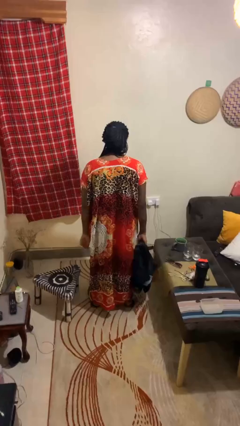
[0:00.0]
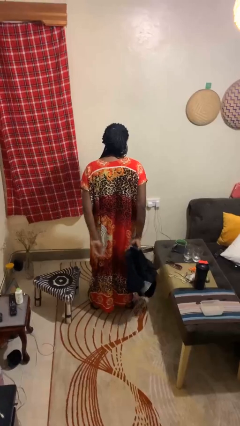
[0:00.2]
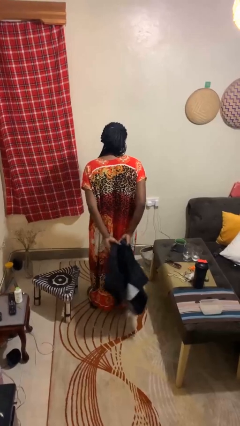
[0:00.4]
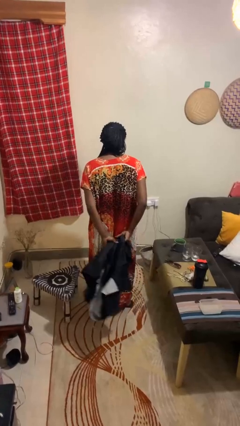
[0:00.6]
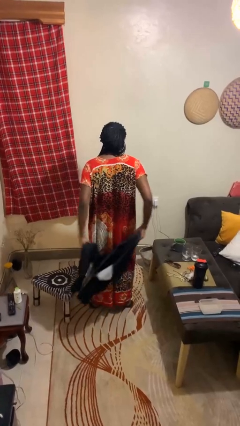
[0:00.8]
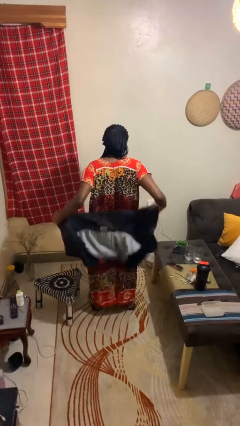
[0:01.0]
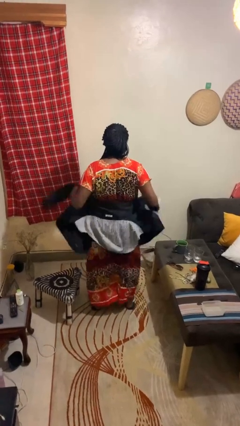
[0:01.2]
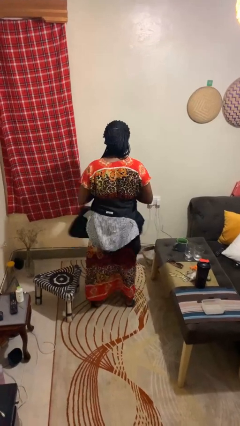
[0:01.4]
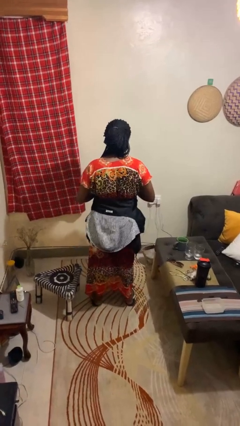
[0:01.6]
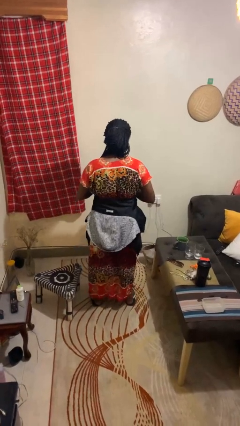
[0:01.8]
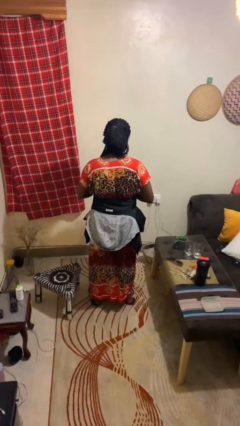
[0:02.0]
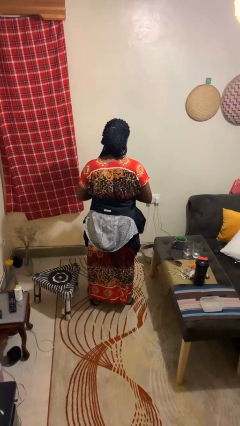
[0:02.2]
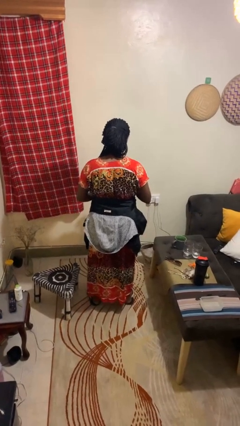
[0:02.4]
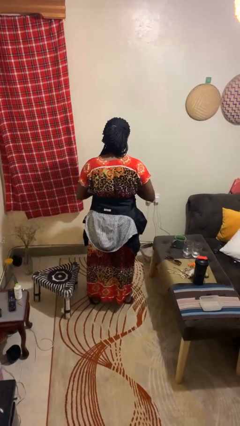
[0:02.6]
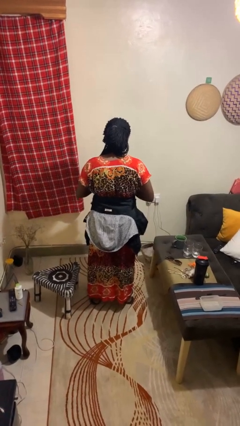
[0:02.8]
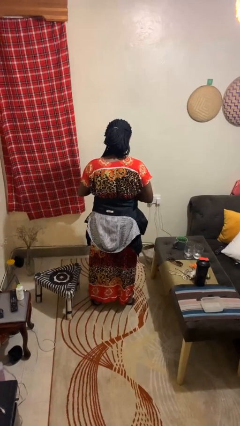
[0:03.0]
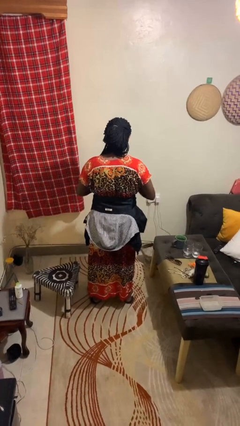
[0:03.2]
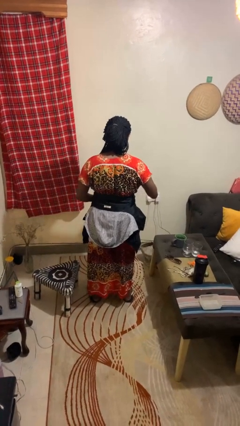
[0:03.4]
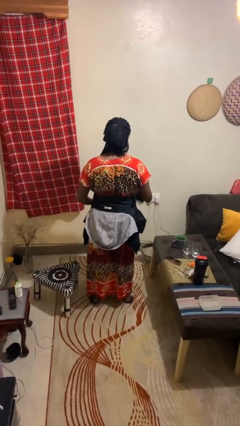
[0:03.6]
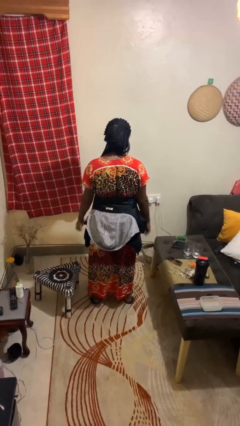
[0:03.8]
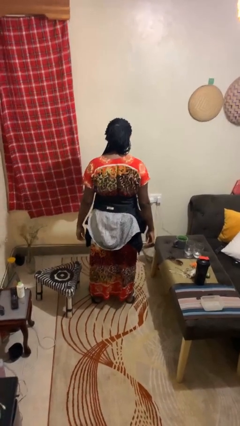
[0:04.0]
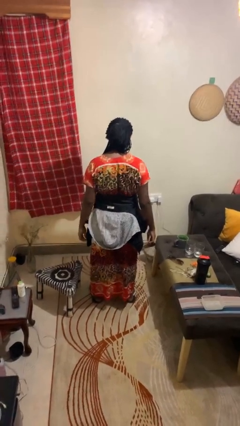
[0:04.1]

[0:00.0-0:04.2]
person ties jacket around waist

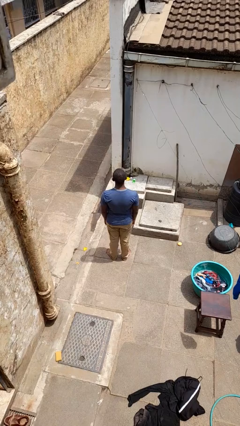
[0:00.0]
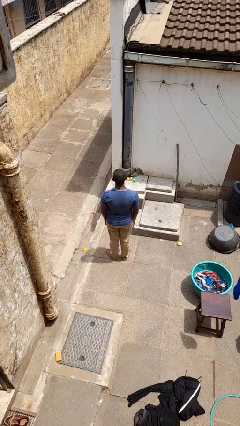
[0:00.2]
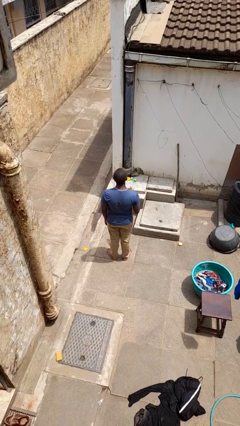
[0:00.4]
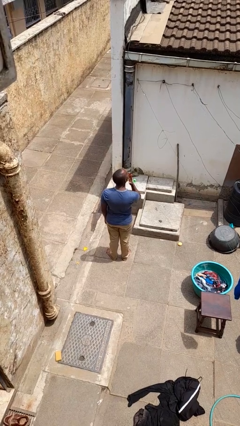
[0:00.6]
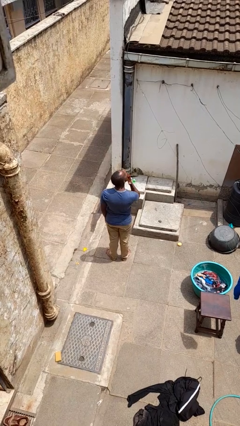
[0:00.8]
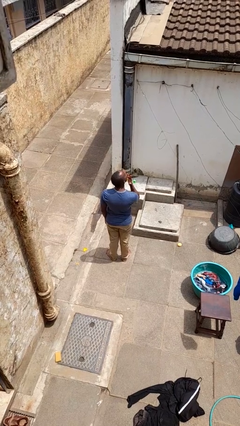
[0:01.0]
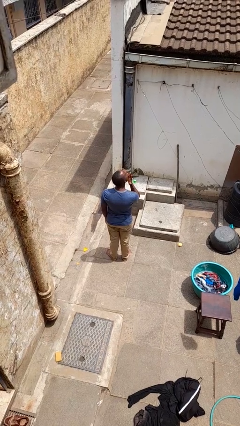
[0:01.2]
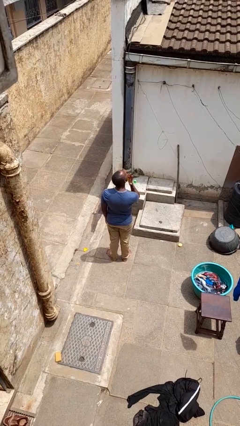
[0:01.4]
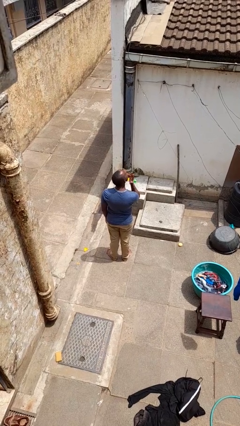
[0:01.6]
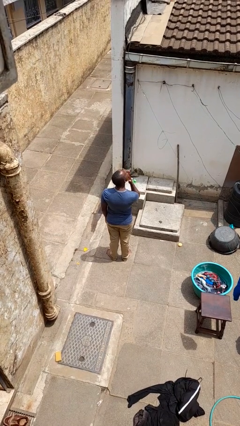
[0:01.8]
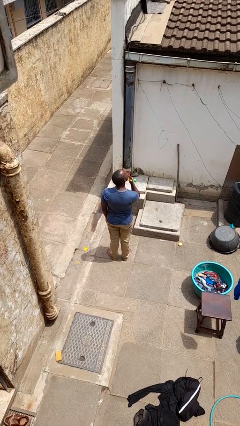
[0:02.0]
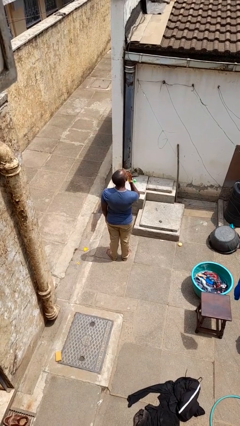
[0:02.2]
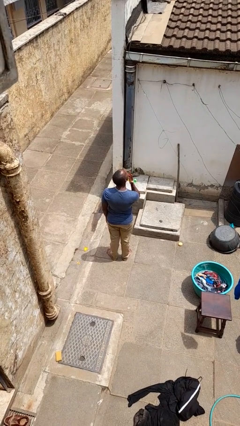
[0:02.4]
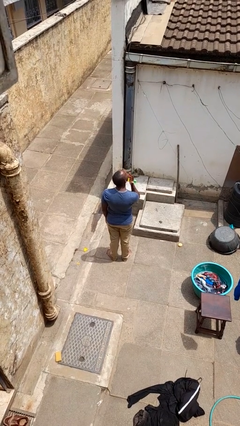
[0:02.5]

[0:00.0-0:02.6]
person licks fingers

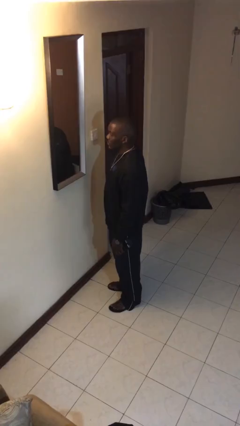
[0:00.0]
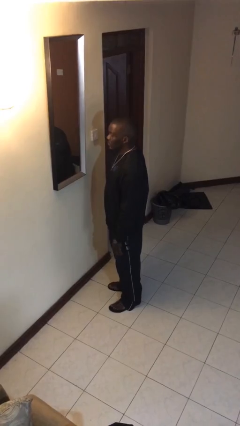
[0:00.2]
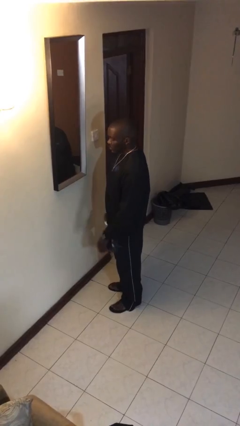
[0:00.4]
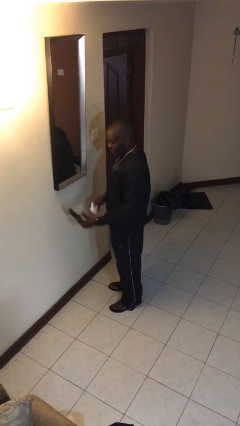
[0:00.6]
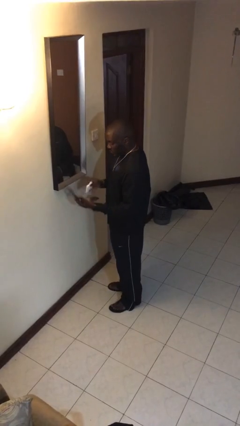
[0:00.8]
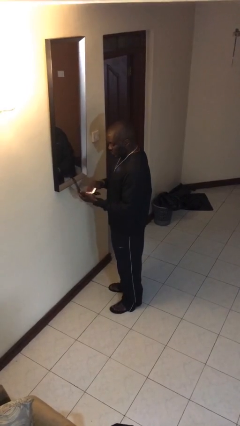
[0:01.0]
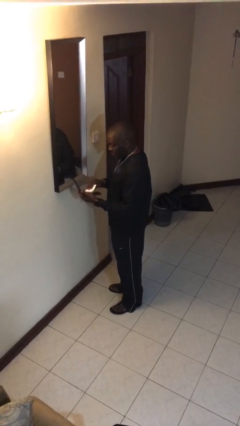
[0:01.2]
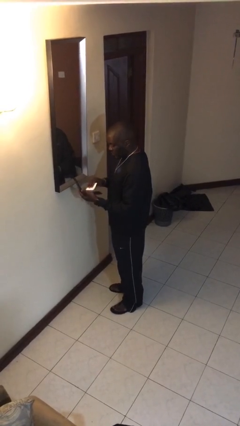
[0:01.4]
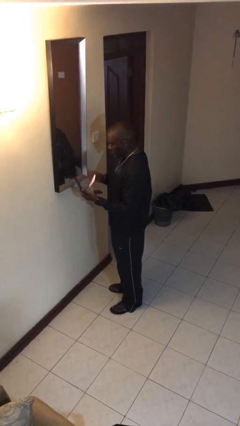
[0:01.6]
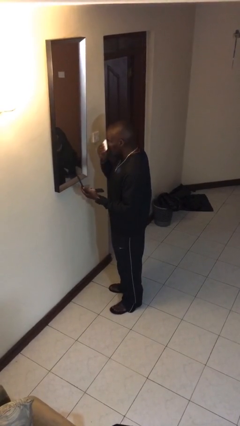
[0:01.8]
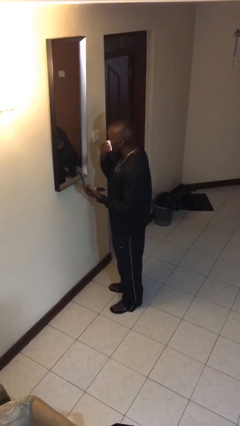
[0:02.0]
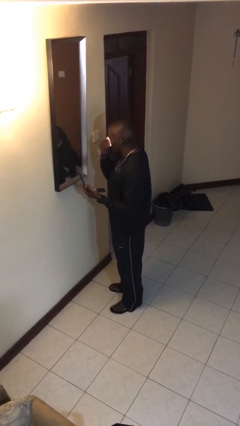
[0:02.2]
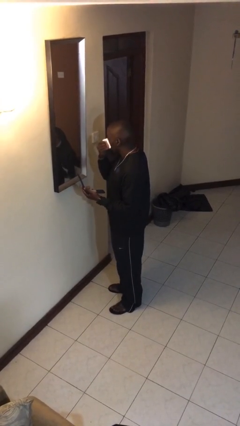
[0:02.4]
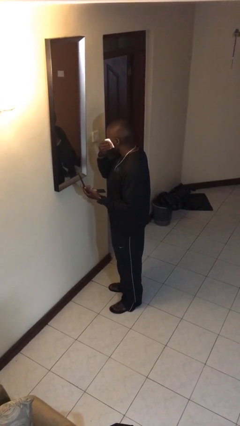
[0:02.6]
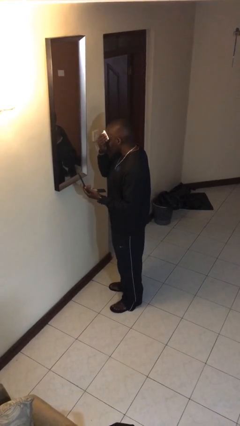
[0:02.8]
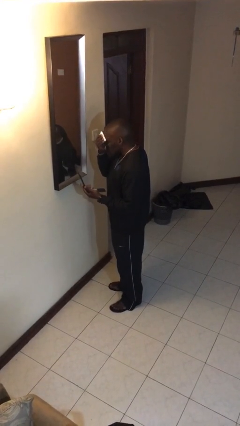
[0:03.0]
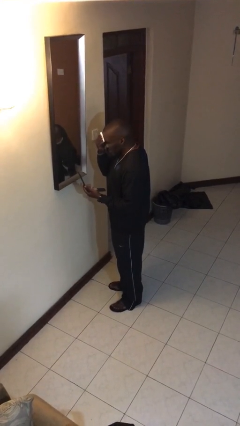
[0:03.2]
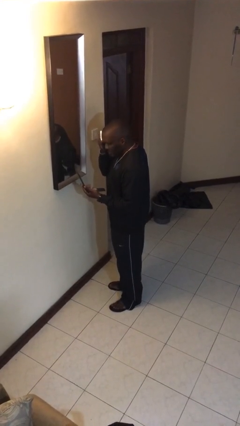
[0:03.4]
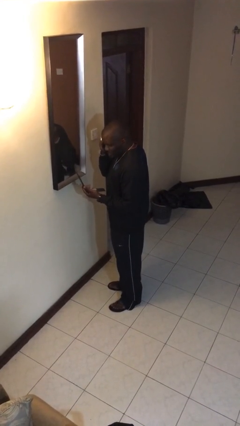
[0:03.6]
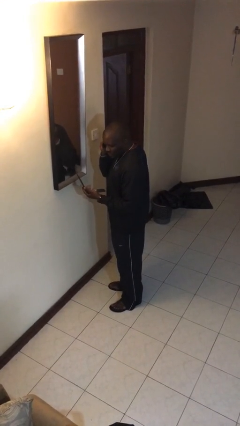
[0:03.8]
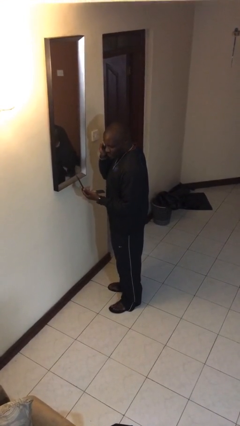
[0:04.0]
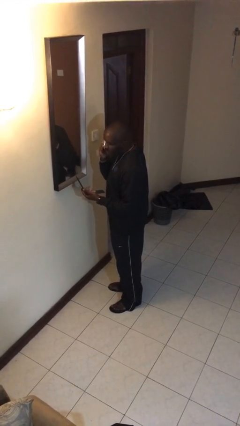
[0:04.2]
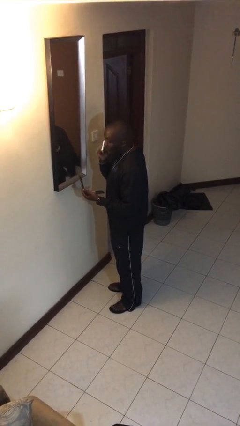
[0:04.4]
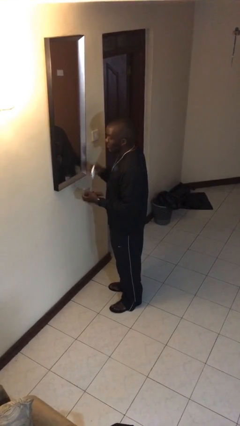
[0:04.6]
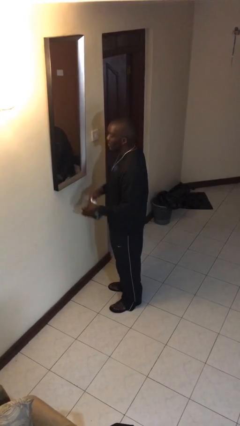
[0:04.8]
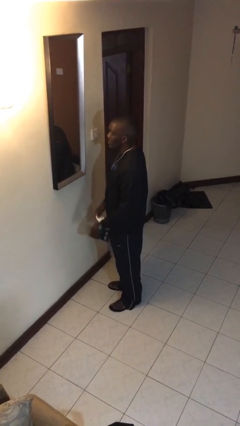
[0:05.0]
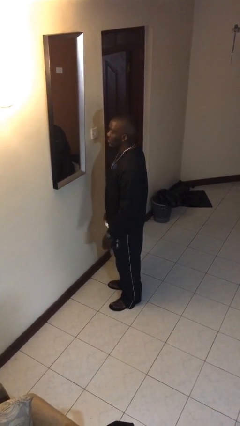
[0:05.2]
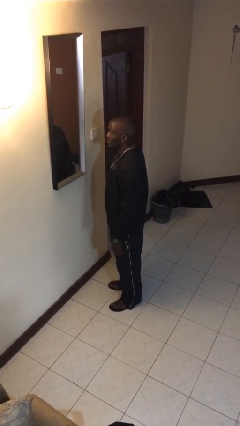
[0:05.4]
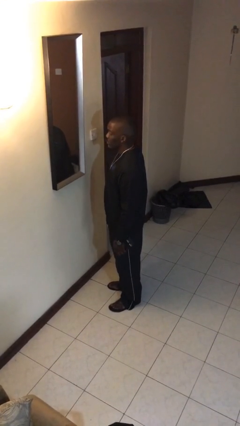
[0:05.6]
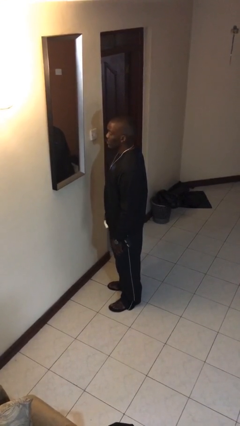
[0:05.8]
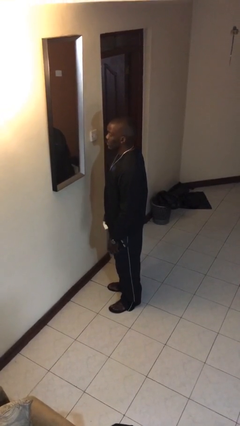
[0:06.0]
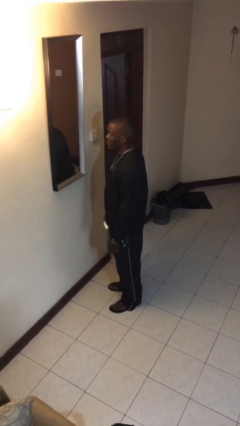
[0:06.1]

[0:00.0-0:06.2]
person applies foundation makeup

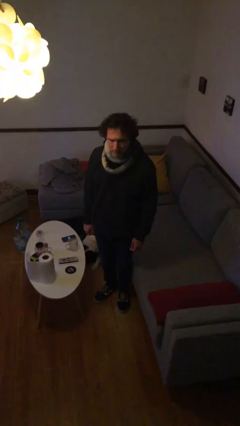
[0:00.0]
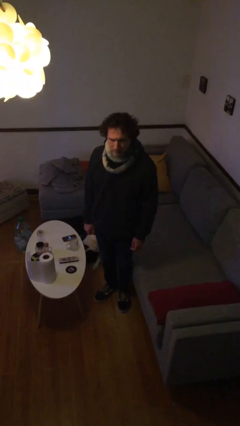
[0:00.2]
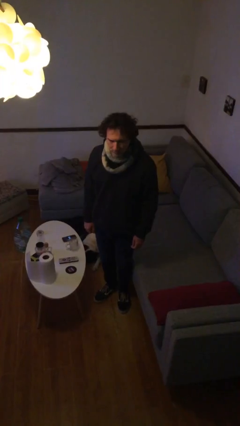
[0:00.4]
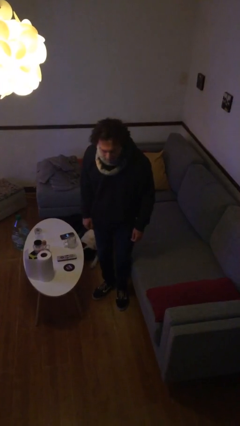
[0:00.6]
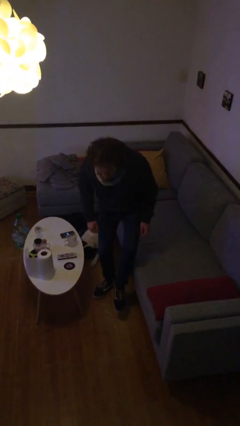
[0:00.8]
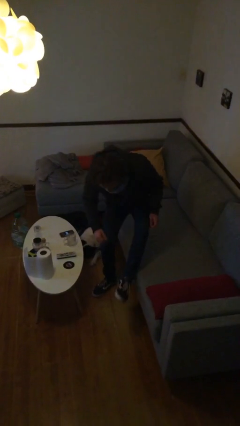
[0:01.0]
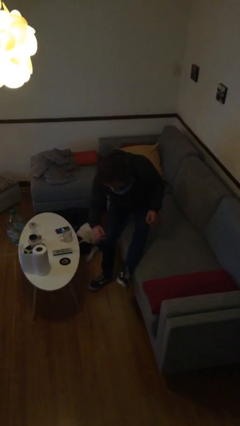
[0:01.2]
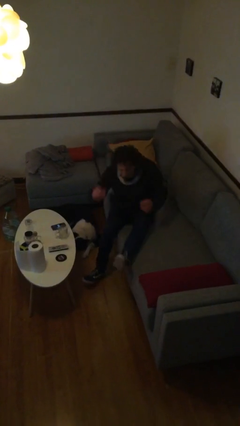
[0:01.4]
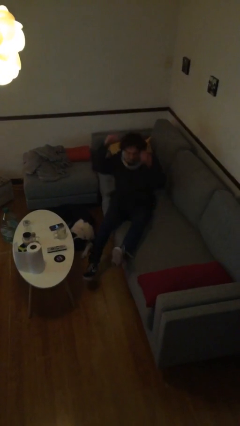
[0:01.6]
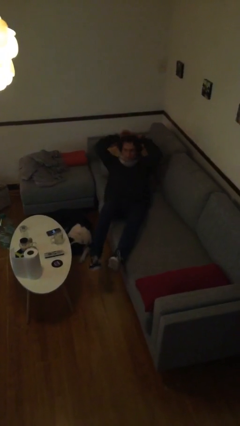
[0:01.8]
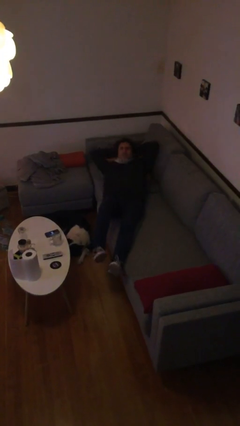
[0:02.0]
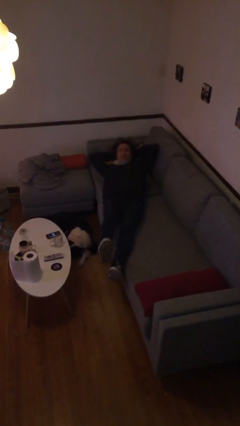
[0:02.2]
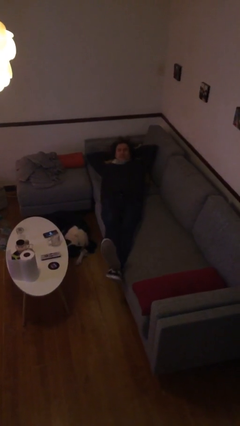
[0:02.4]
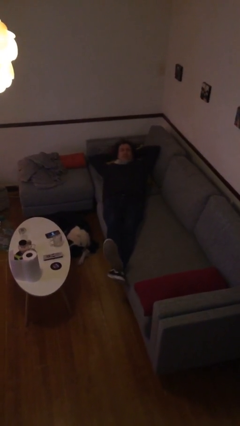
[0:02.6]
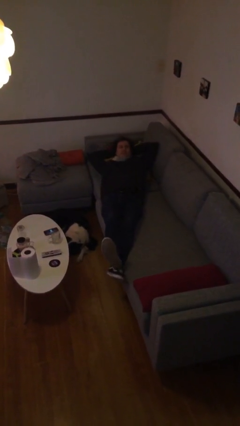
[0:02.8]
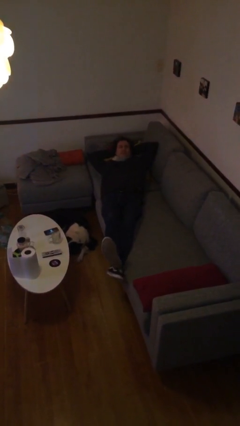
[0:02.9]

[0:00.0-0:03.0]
person lies down on couch

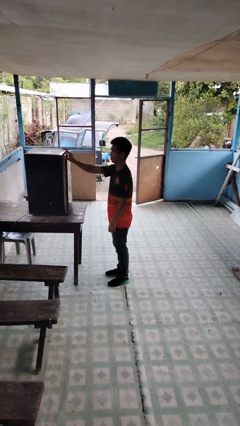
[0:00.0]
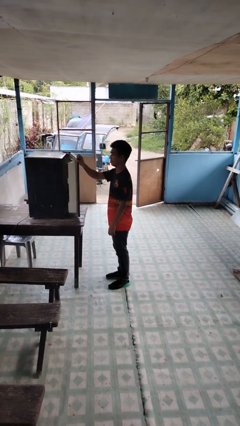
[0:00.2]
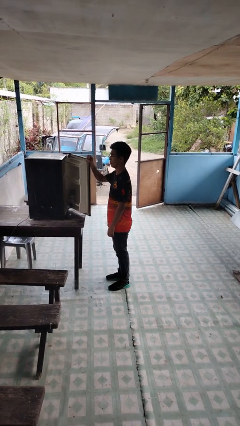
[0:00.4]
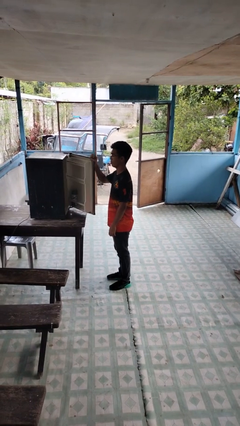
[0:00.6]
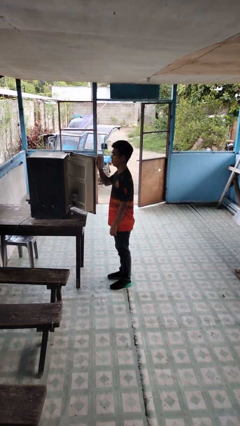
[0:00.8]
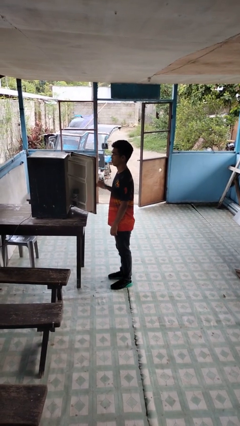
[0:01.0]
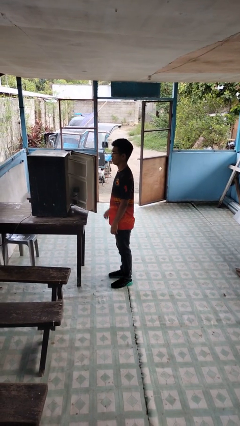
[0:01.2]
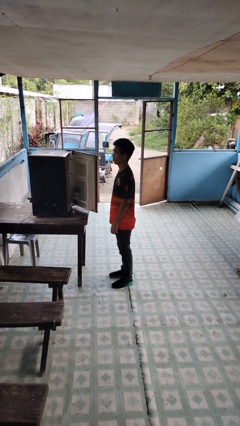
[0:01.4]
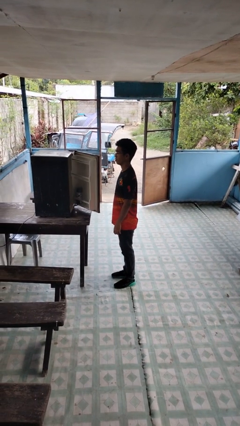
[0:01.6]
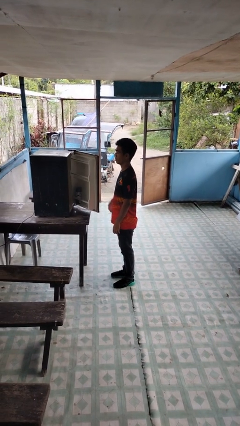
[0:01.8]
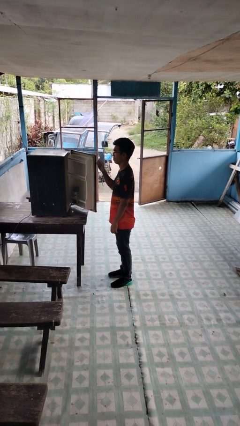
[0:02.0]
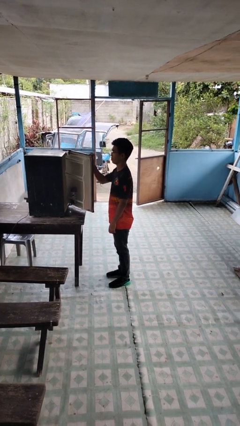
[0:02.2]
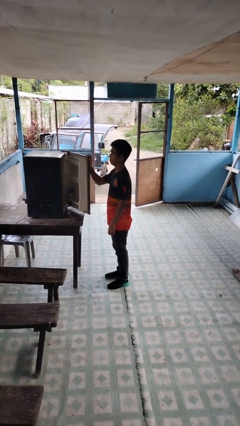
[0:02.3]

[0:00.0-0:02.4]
person opens refrigerator
